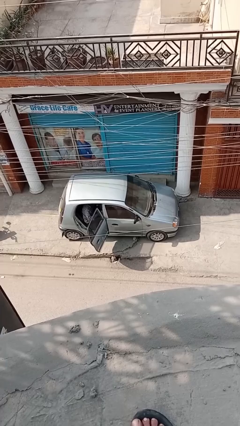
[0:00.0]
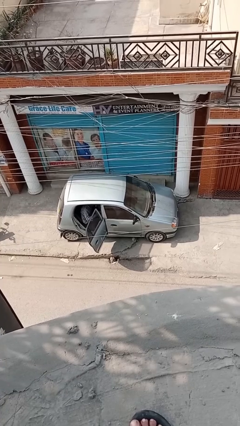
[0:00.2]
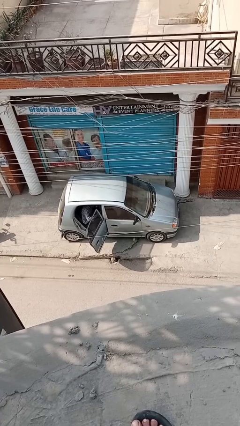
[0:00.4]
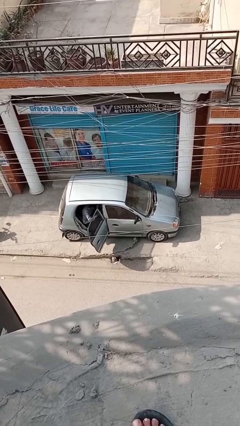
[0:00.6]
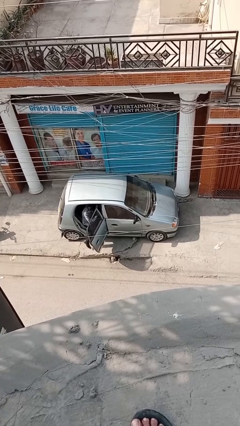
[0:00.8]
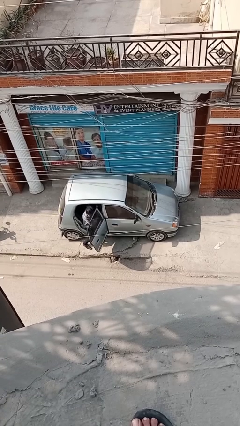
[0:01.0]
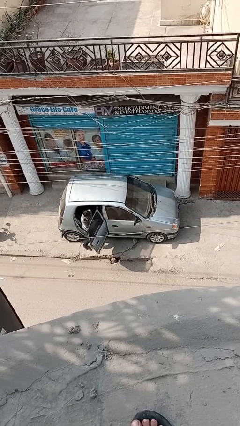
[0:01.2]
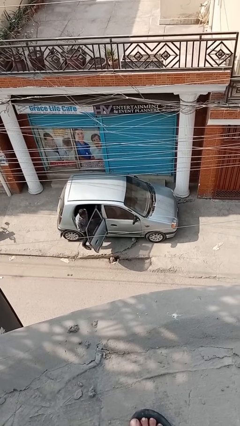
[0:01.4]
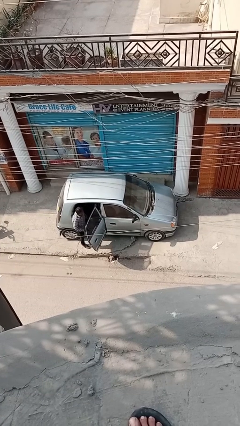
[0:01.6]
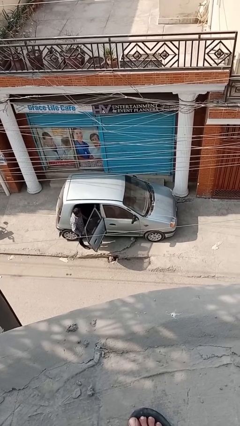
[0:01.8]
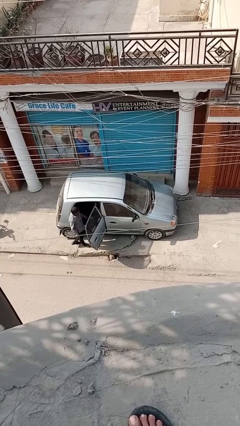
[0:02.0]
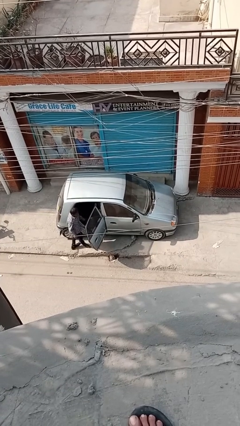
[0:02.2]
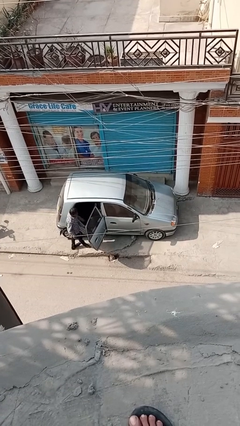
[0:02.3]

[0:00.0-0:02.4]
person exits car

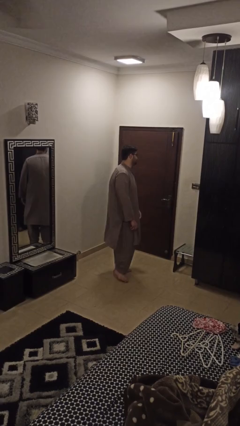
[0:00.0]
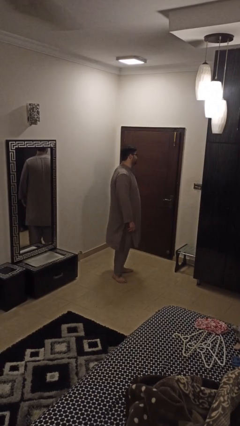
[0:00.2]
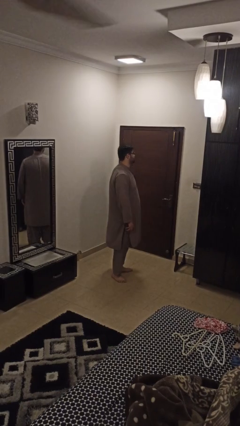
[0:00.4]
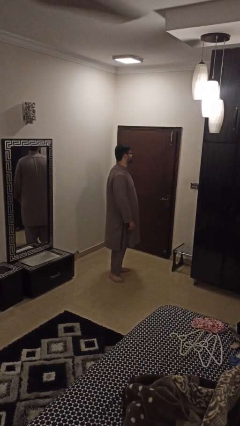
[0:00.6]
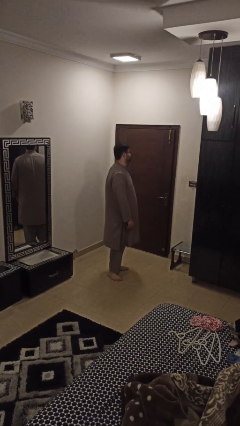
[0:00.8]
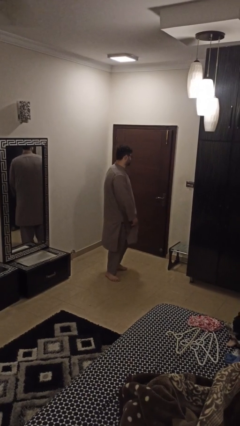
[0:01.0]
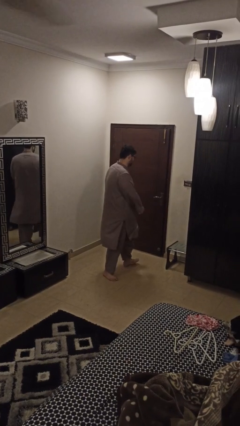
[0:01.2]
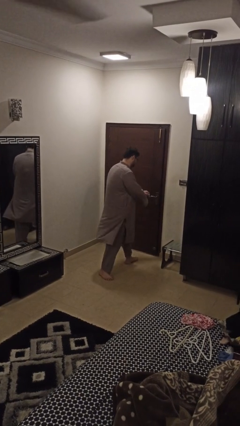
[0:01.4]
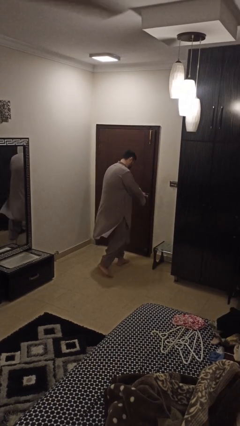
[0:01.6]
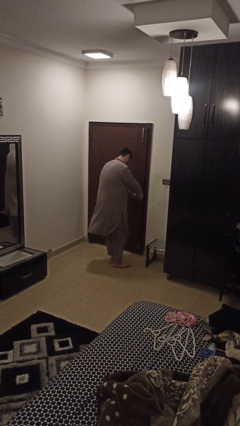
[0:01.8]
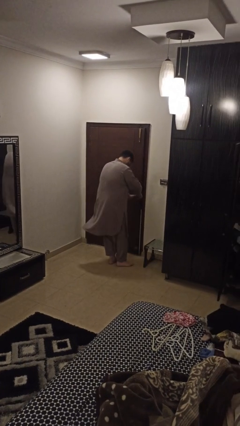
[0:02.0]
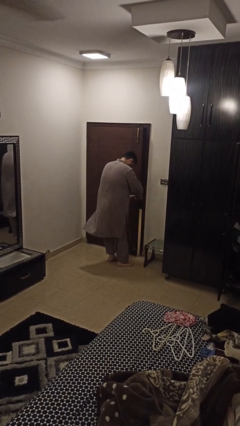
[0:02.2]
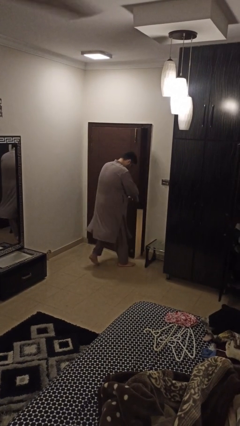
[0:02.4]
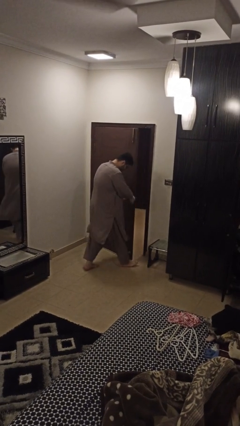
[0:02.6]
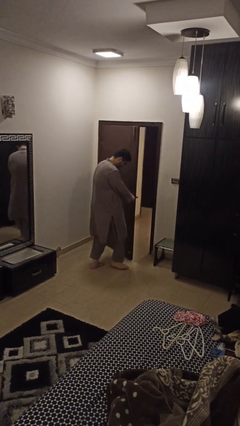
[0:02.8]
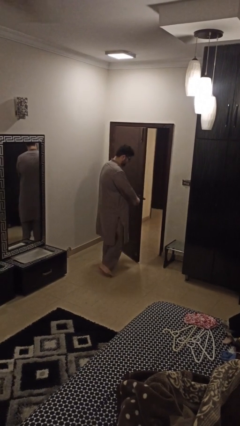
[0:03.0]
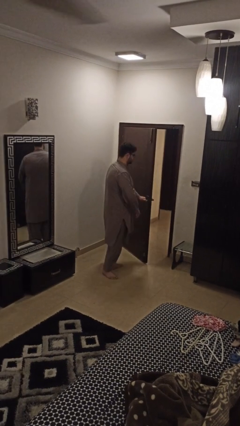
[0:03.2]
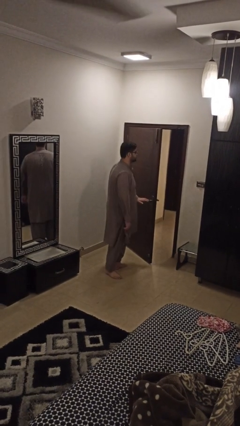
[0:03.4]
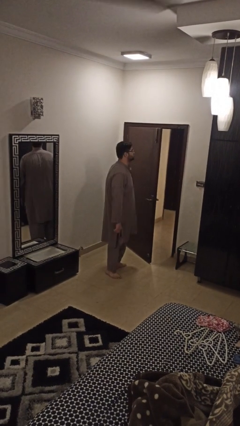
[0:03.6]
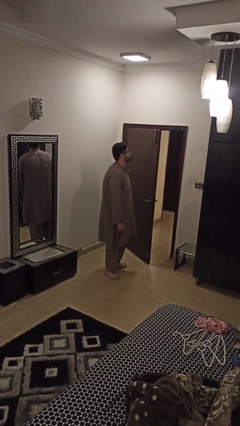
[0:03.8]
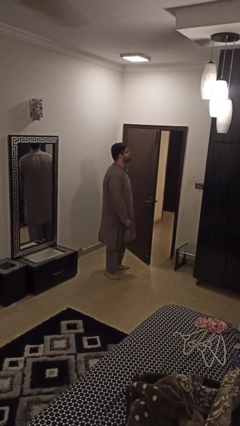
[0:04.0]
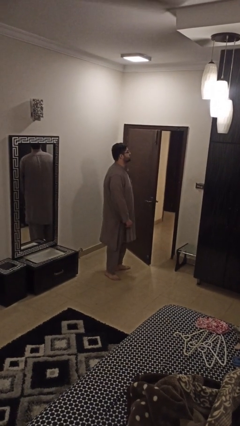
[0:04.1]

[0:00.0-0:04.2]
person opens facility door

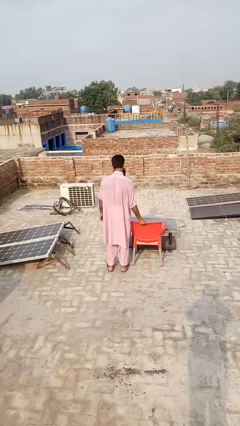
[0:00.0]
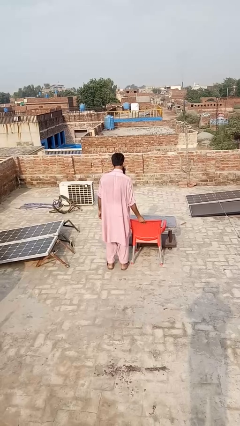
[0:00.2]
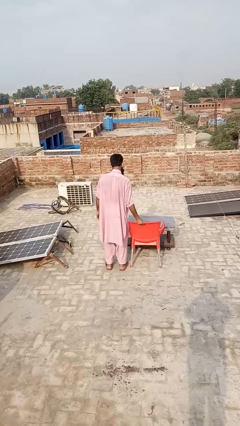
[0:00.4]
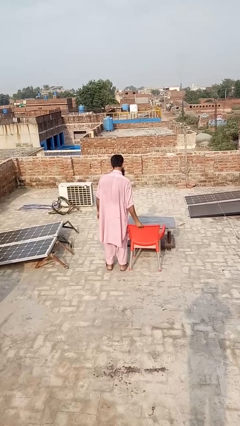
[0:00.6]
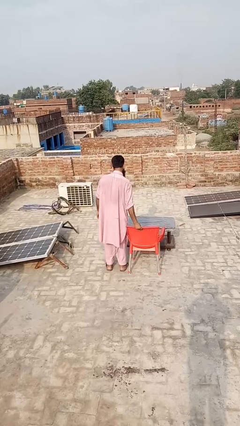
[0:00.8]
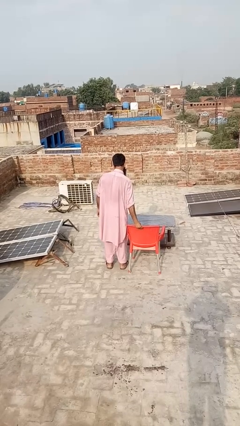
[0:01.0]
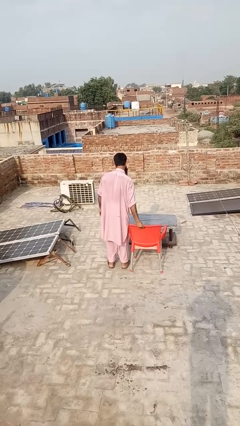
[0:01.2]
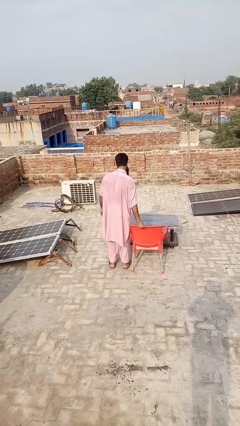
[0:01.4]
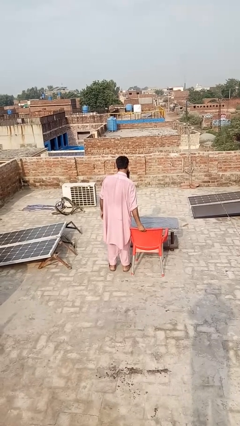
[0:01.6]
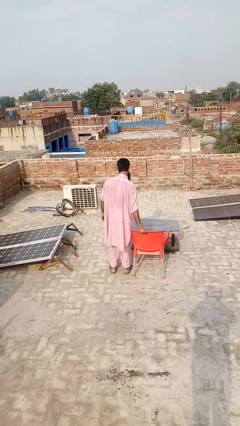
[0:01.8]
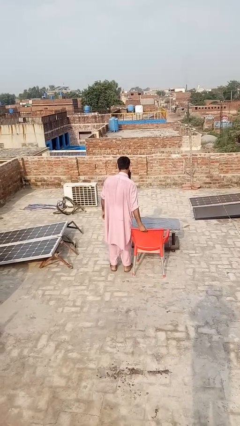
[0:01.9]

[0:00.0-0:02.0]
person pulls out chair

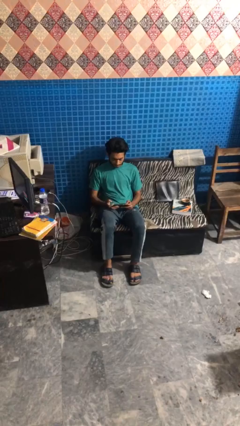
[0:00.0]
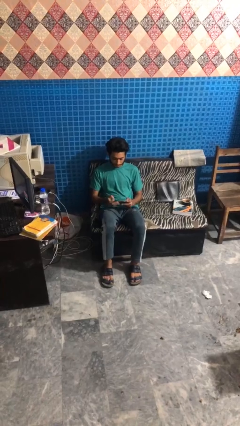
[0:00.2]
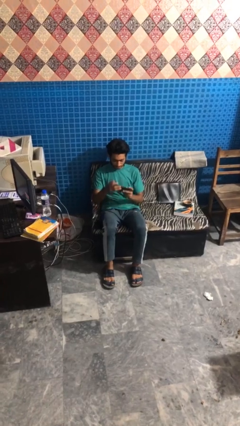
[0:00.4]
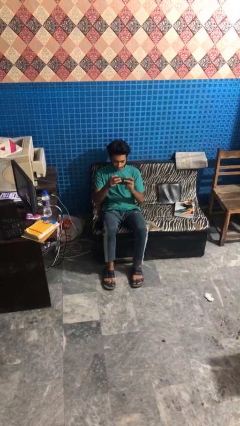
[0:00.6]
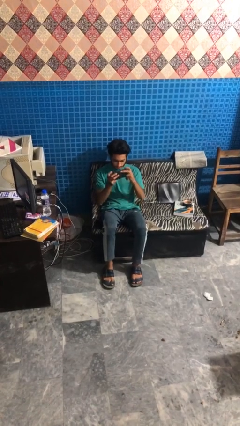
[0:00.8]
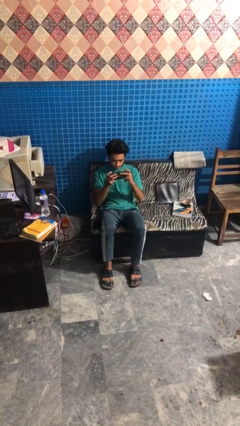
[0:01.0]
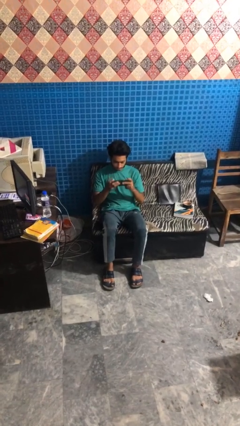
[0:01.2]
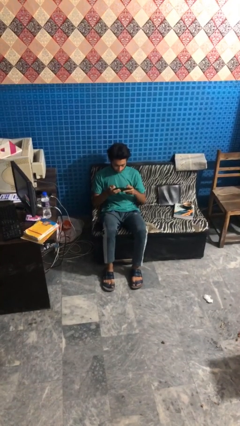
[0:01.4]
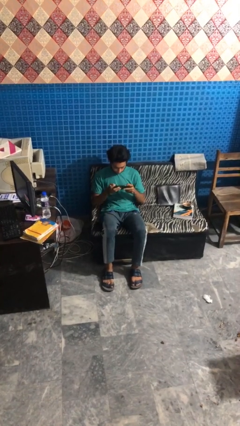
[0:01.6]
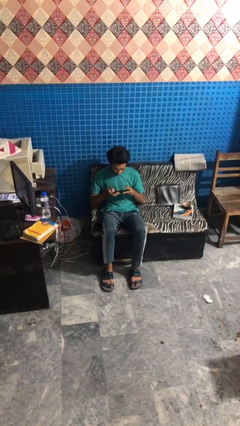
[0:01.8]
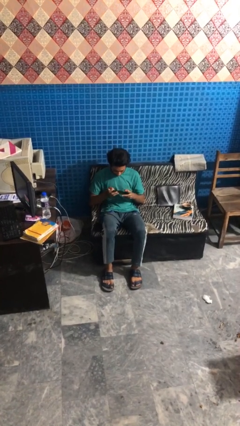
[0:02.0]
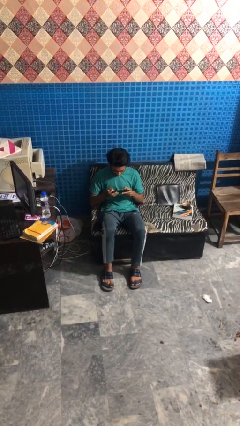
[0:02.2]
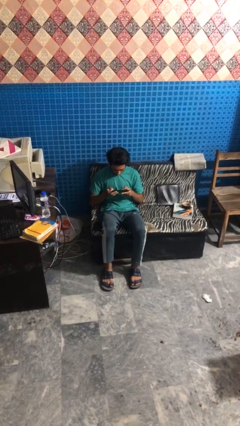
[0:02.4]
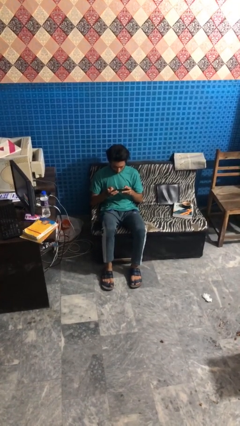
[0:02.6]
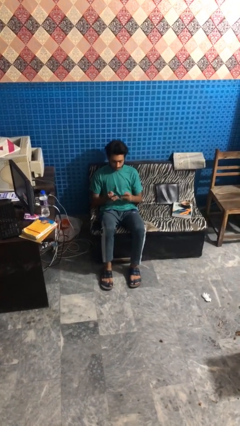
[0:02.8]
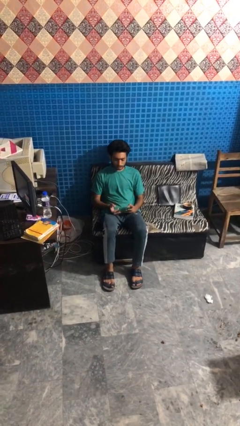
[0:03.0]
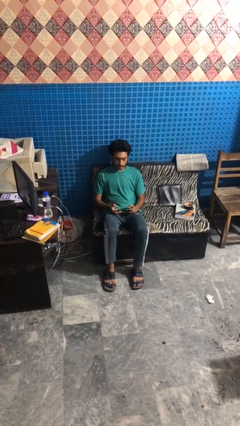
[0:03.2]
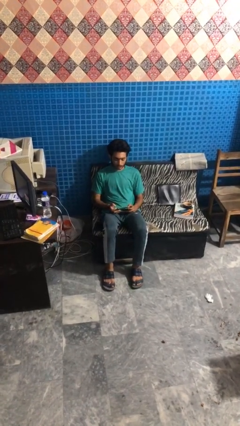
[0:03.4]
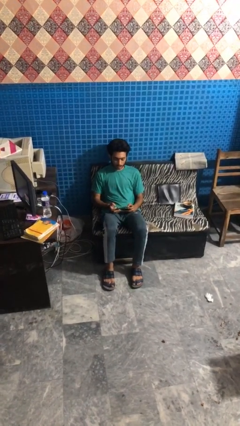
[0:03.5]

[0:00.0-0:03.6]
person interacts with handheld game

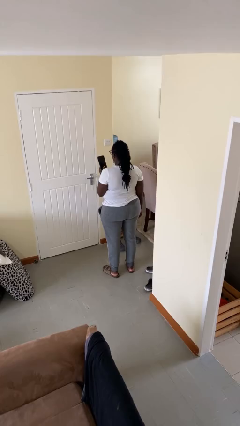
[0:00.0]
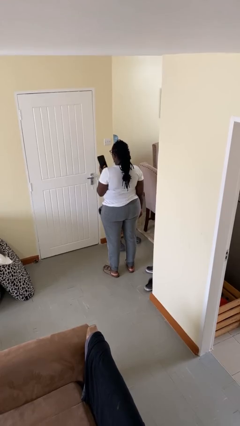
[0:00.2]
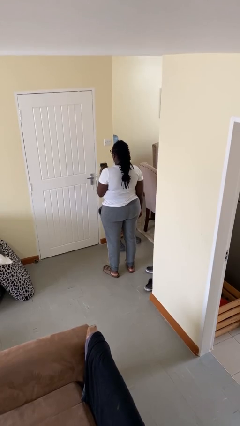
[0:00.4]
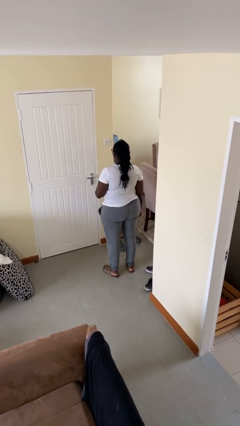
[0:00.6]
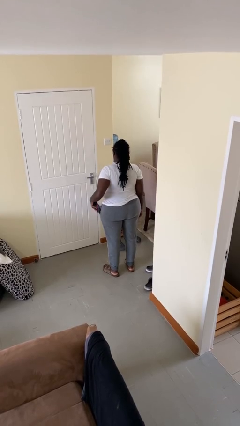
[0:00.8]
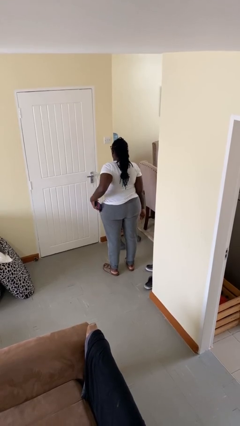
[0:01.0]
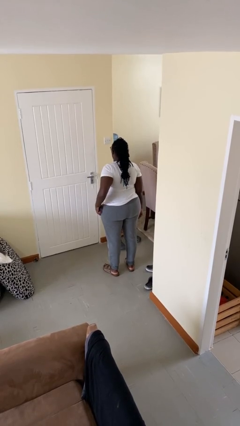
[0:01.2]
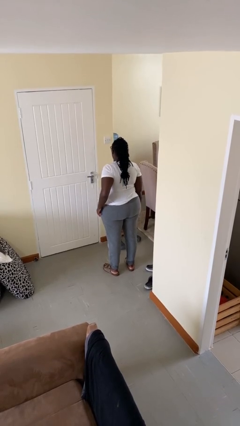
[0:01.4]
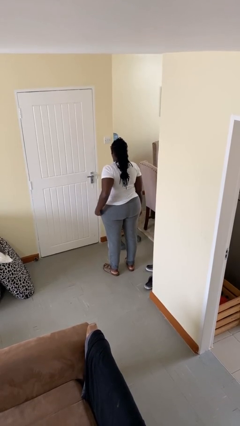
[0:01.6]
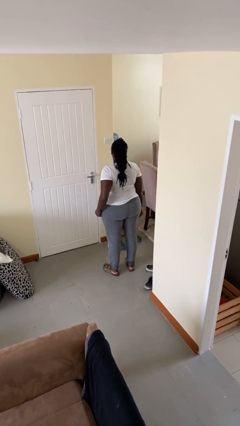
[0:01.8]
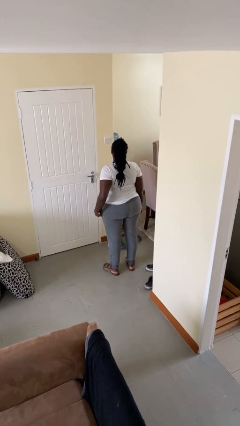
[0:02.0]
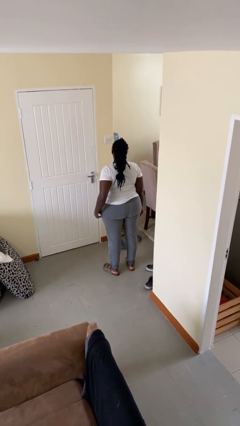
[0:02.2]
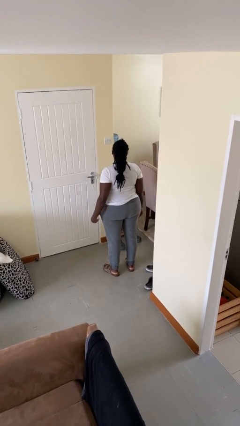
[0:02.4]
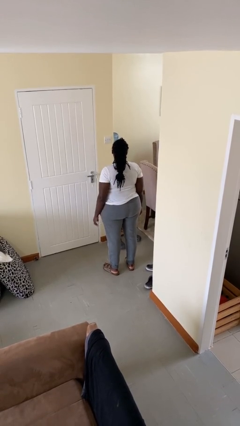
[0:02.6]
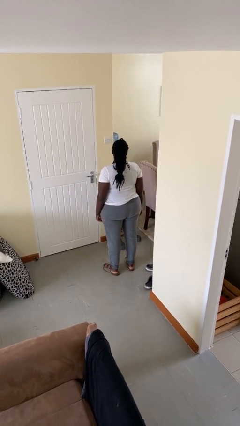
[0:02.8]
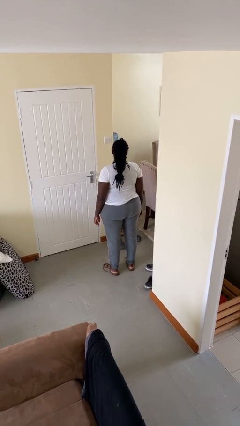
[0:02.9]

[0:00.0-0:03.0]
person puts phone into pocket

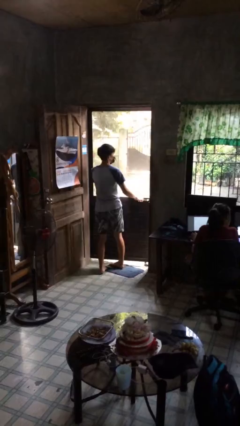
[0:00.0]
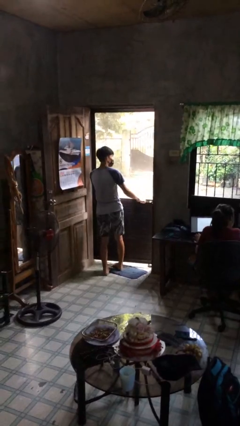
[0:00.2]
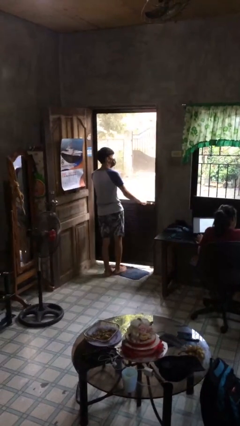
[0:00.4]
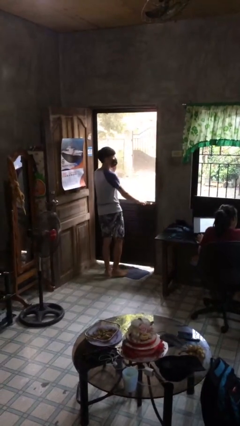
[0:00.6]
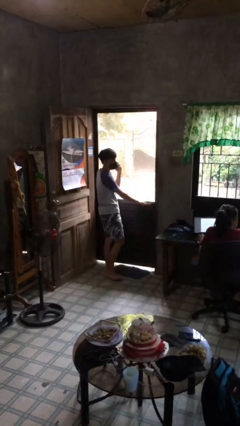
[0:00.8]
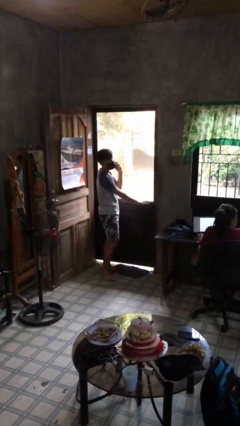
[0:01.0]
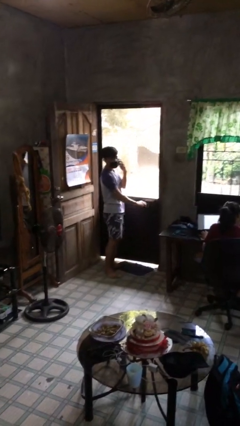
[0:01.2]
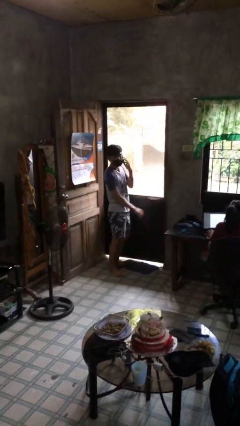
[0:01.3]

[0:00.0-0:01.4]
person closes facility door

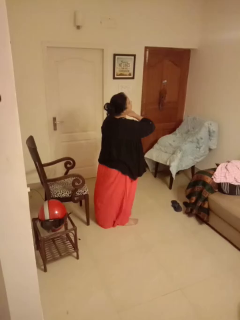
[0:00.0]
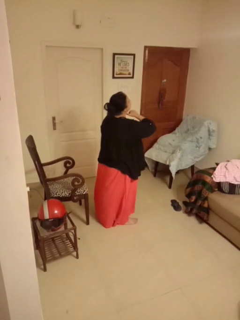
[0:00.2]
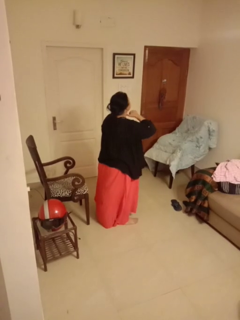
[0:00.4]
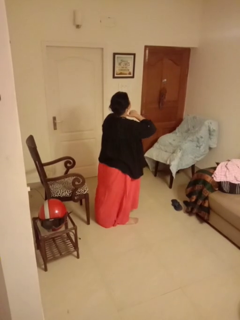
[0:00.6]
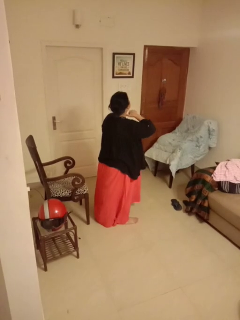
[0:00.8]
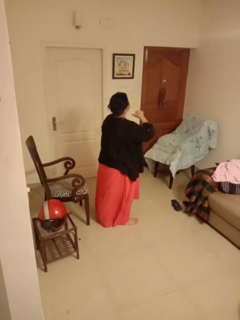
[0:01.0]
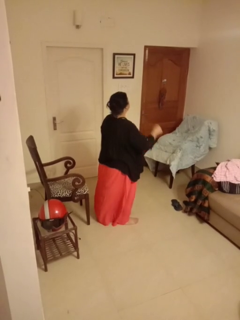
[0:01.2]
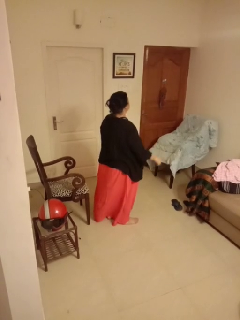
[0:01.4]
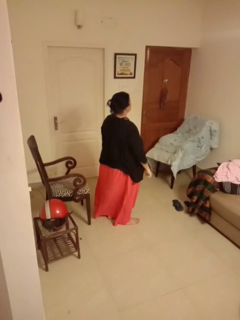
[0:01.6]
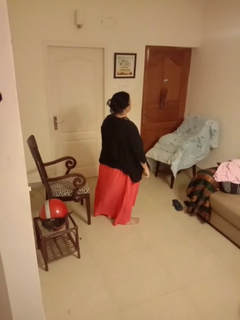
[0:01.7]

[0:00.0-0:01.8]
person gestures cut
